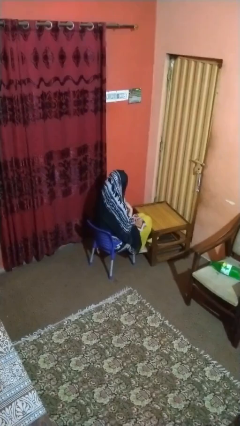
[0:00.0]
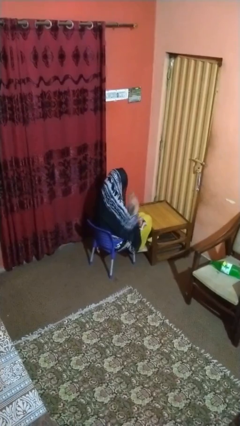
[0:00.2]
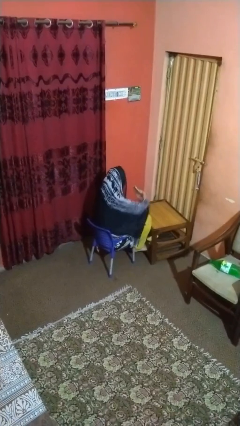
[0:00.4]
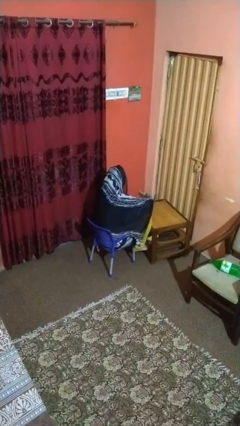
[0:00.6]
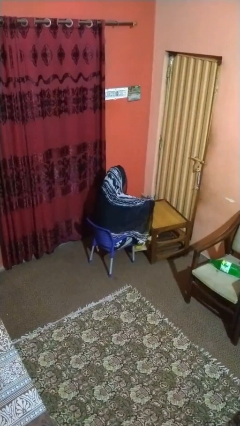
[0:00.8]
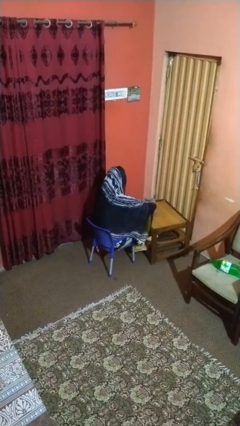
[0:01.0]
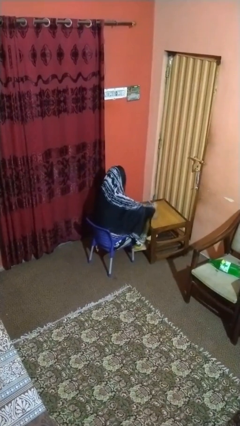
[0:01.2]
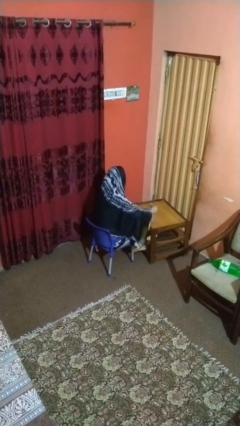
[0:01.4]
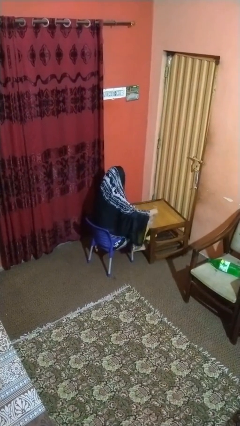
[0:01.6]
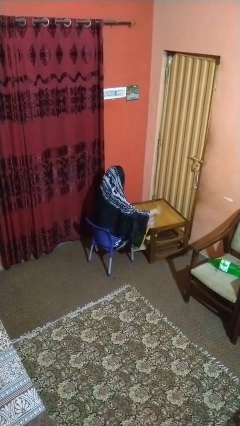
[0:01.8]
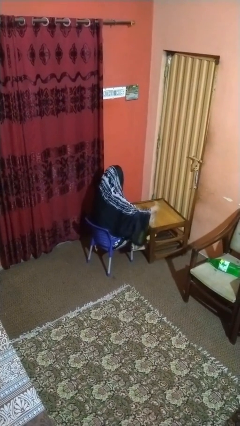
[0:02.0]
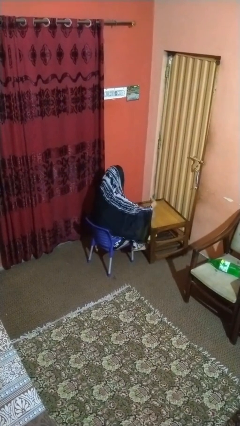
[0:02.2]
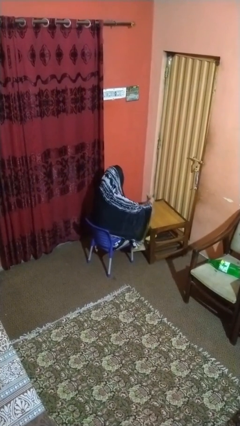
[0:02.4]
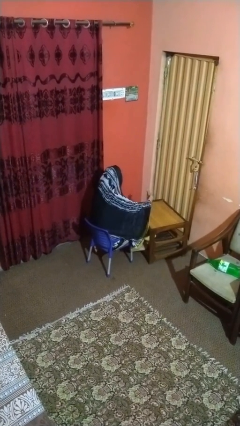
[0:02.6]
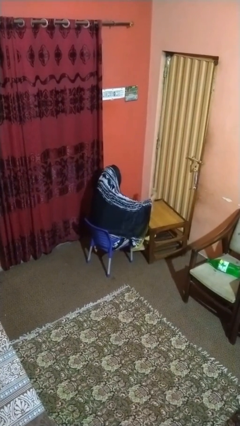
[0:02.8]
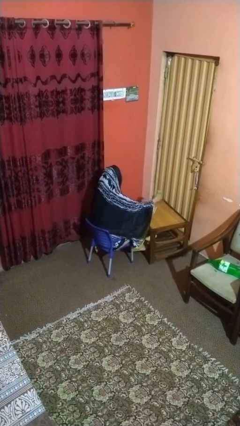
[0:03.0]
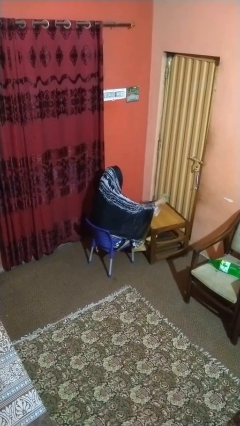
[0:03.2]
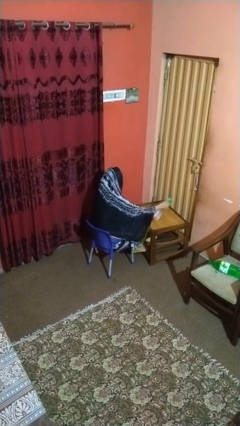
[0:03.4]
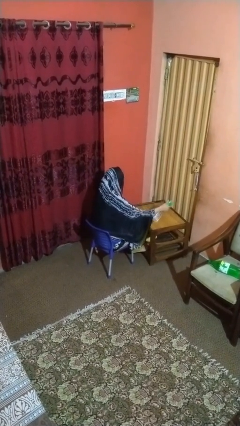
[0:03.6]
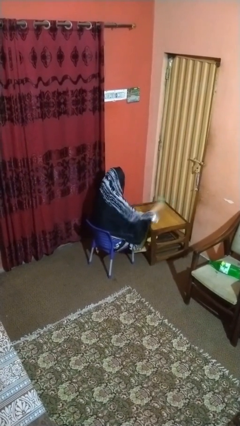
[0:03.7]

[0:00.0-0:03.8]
person sprays from bottle

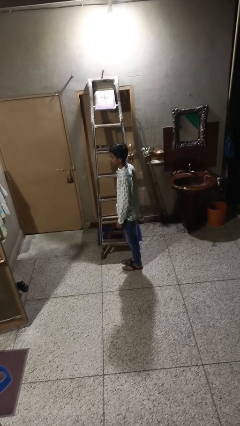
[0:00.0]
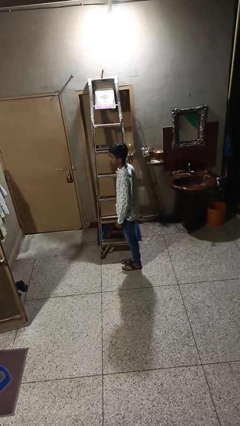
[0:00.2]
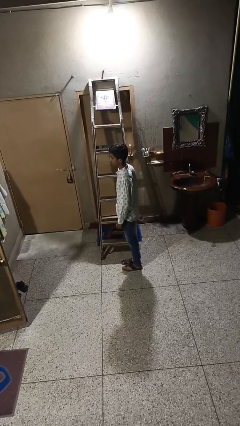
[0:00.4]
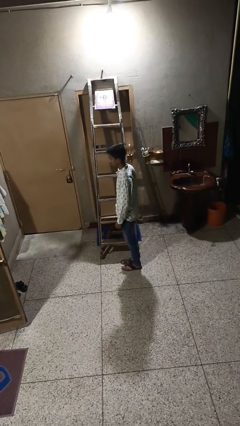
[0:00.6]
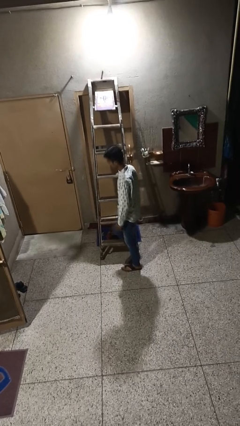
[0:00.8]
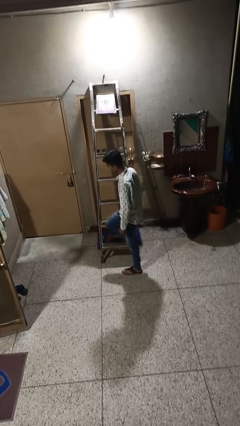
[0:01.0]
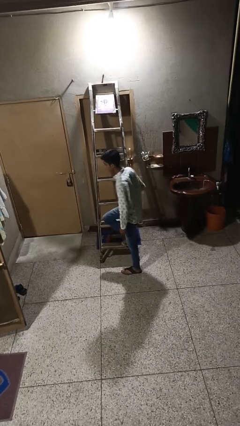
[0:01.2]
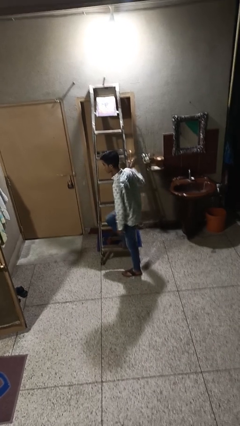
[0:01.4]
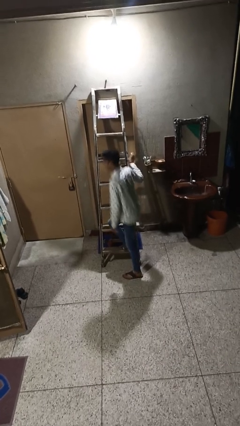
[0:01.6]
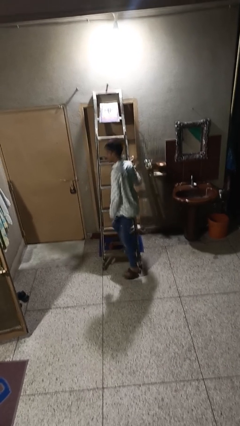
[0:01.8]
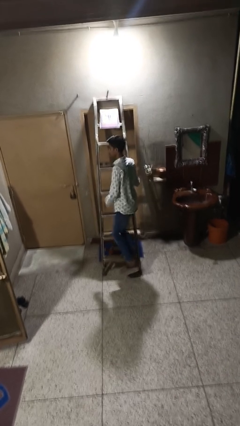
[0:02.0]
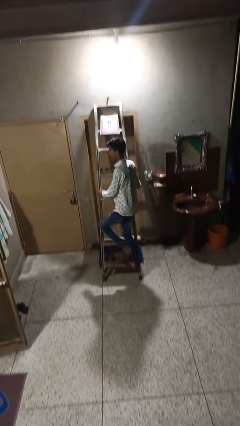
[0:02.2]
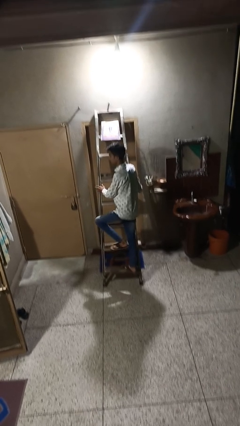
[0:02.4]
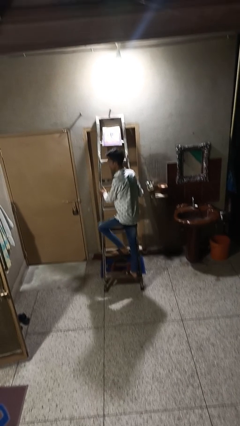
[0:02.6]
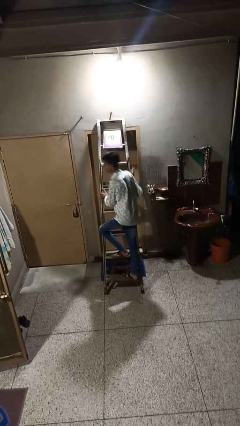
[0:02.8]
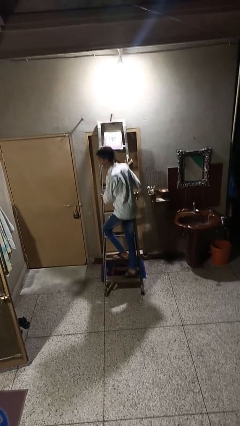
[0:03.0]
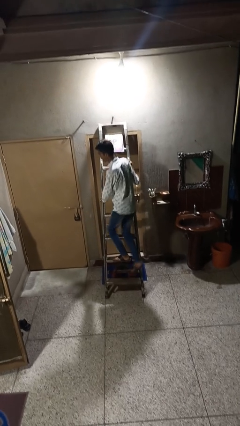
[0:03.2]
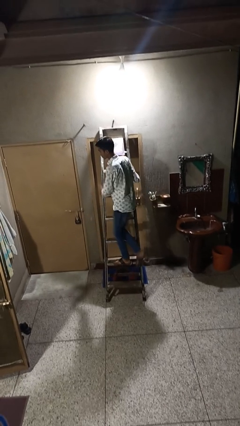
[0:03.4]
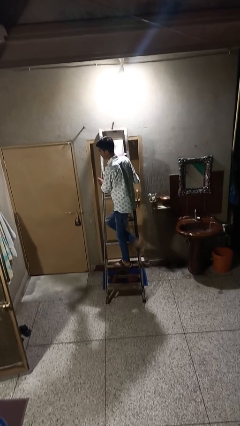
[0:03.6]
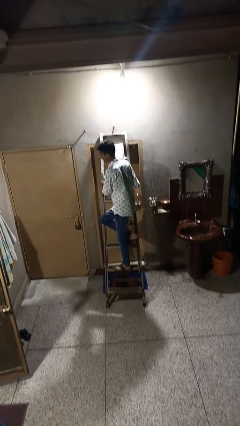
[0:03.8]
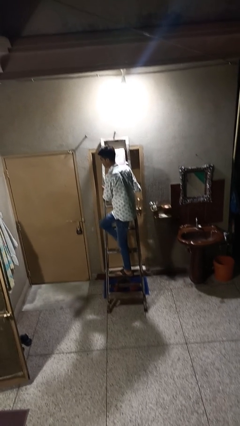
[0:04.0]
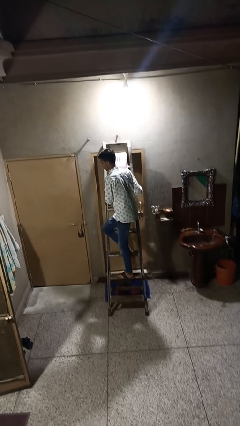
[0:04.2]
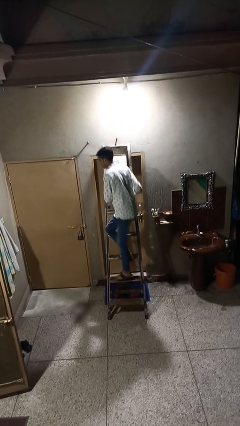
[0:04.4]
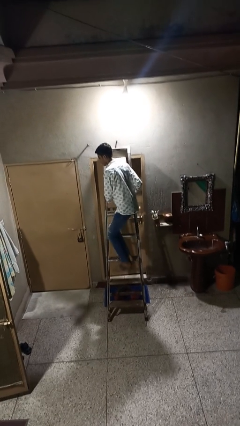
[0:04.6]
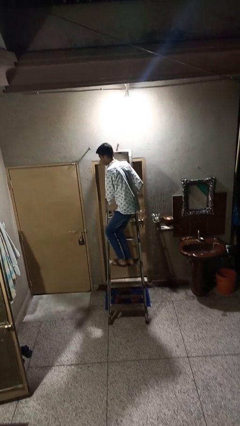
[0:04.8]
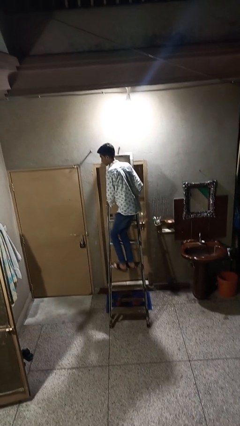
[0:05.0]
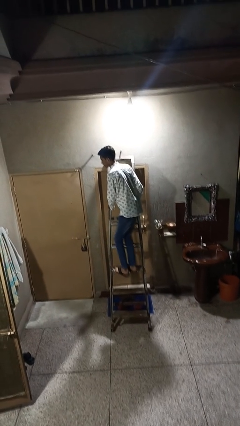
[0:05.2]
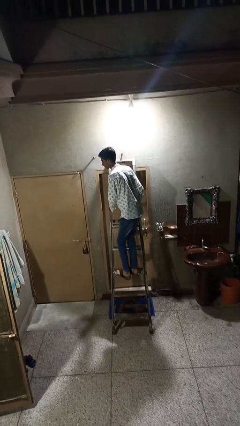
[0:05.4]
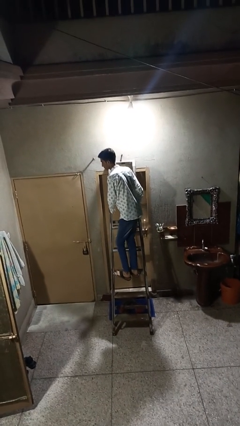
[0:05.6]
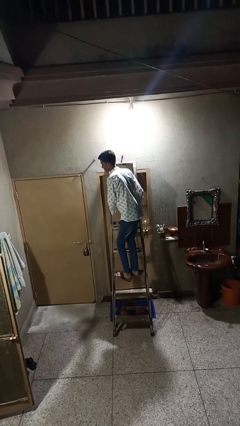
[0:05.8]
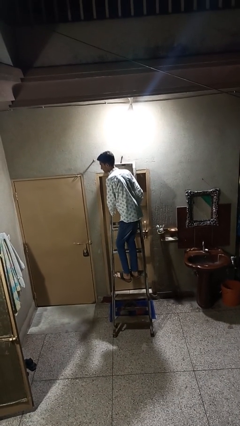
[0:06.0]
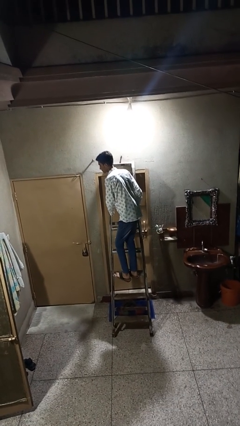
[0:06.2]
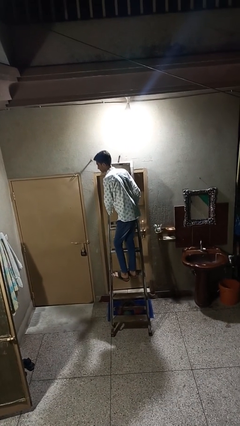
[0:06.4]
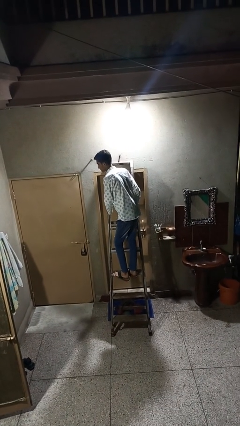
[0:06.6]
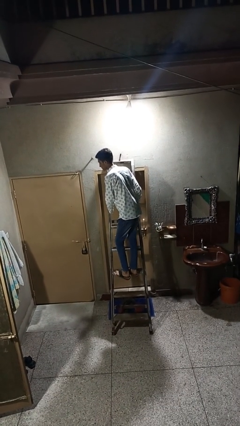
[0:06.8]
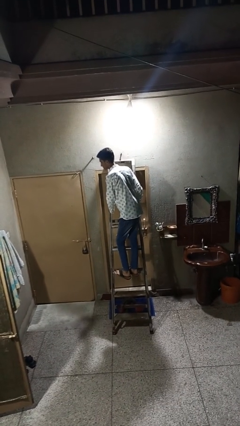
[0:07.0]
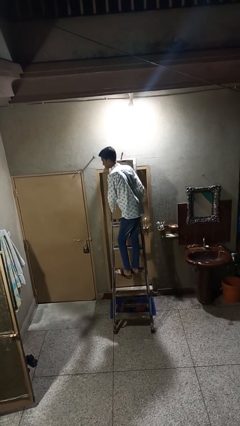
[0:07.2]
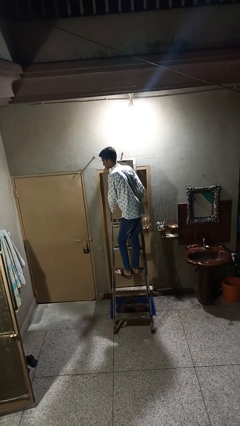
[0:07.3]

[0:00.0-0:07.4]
person climbs up ladder

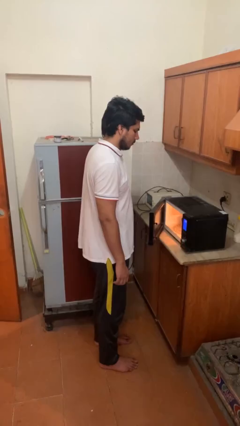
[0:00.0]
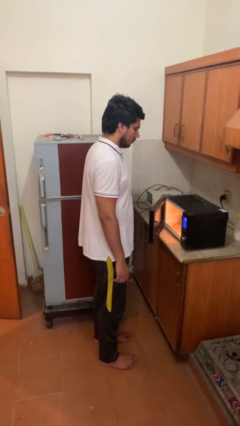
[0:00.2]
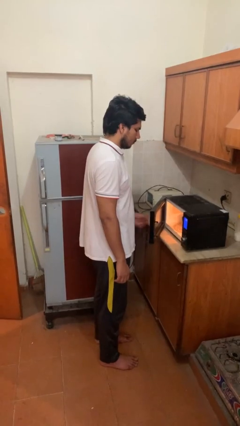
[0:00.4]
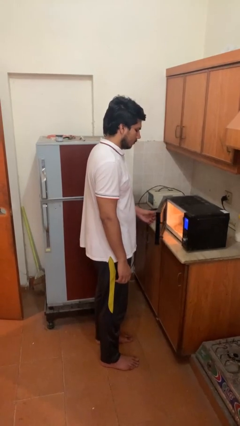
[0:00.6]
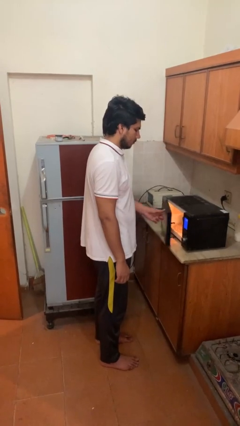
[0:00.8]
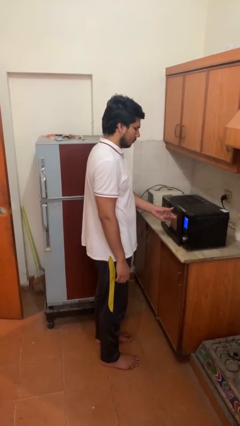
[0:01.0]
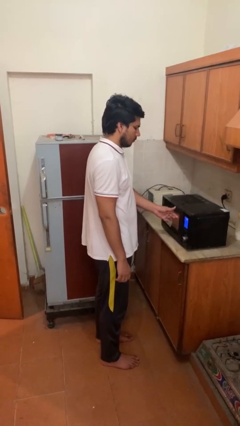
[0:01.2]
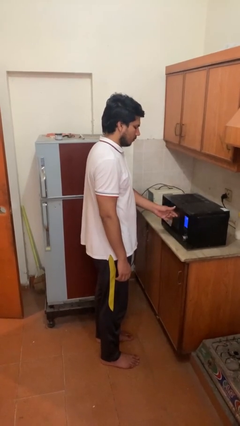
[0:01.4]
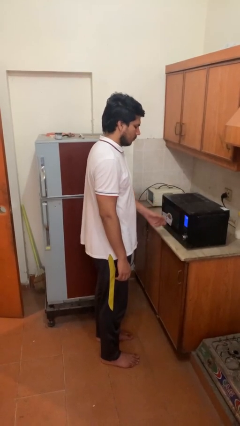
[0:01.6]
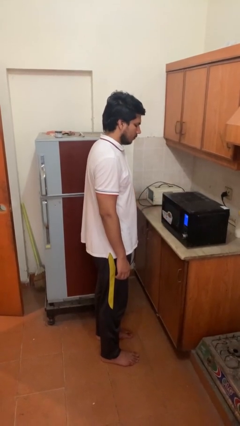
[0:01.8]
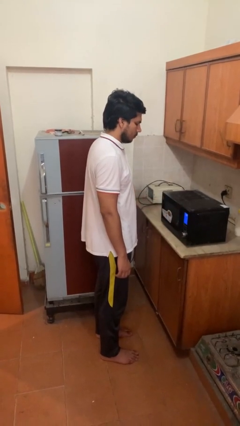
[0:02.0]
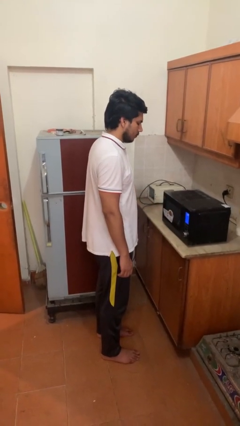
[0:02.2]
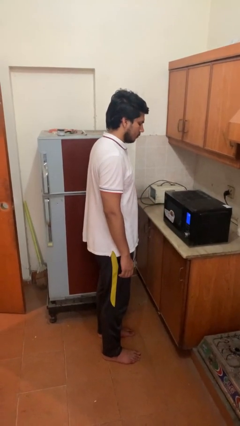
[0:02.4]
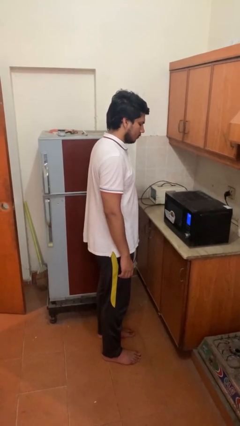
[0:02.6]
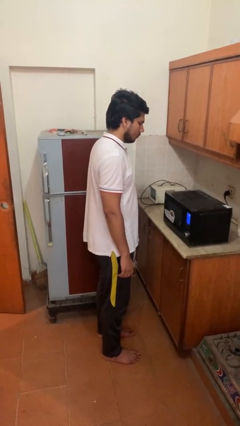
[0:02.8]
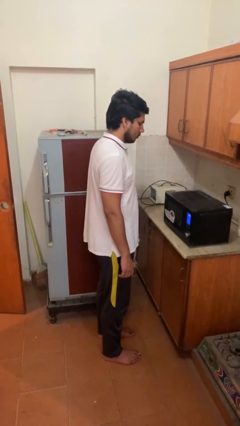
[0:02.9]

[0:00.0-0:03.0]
person closes microwave

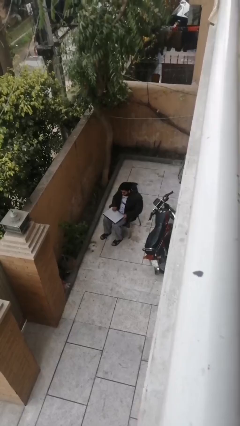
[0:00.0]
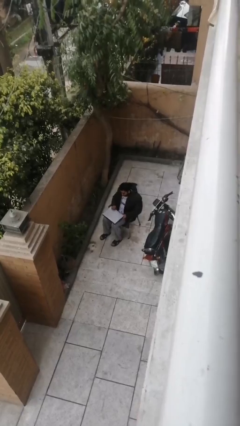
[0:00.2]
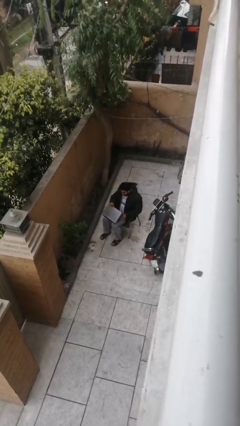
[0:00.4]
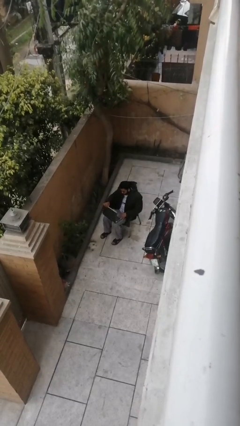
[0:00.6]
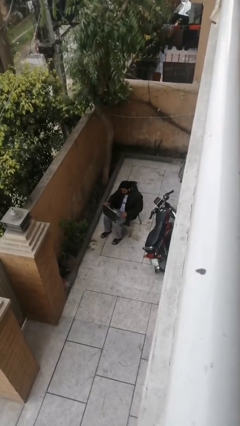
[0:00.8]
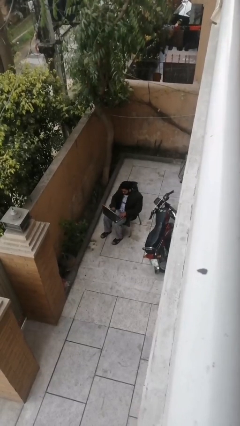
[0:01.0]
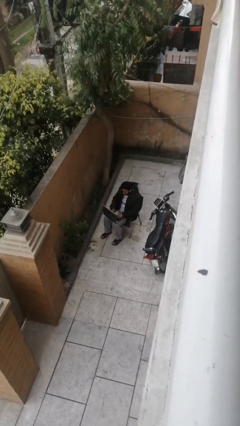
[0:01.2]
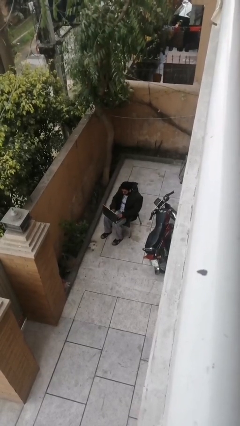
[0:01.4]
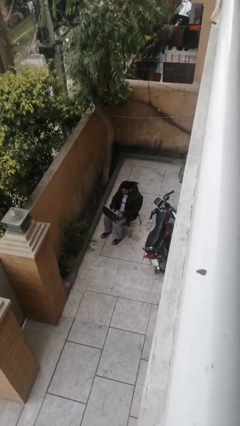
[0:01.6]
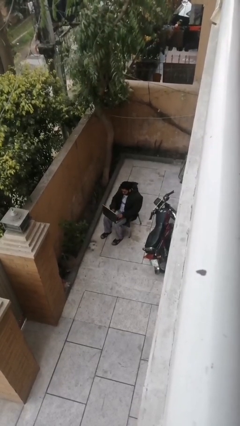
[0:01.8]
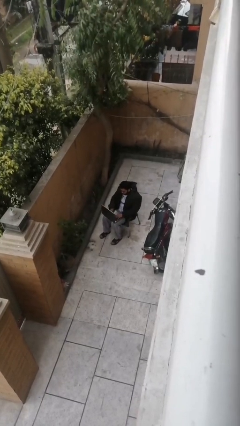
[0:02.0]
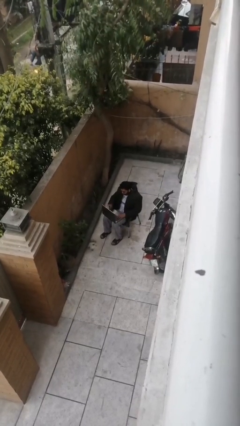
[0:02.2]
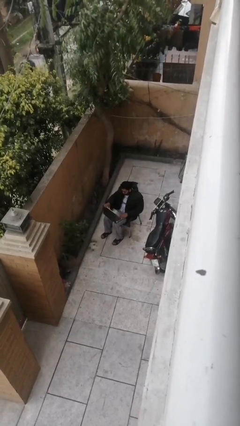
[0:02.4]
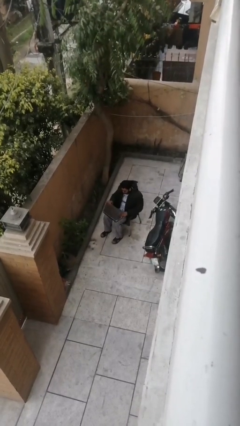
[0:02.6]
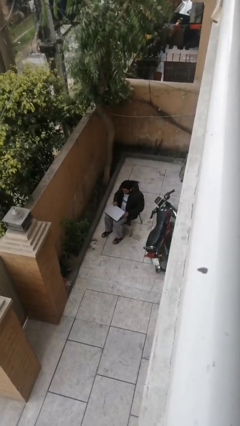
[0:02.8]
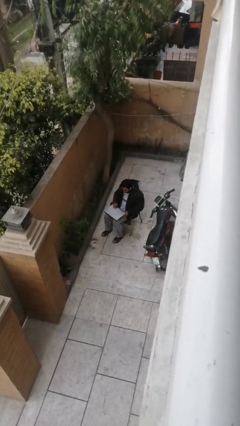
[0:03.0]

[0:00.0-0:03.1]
person interacts with laptop

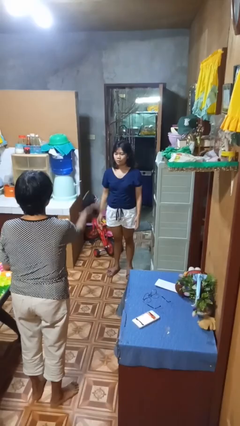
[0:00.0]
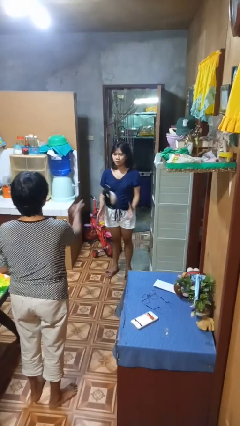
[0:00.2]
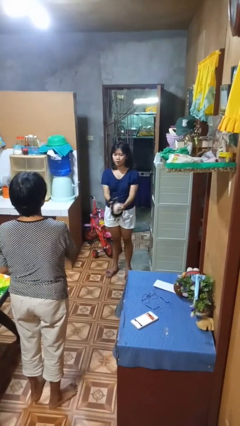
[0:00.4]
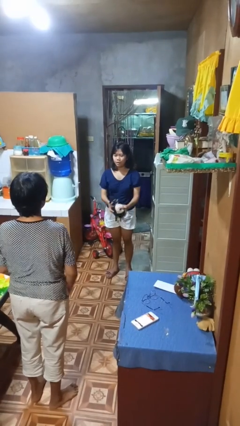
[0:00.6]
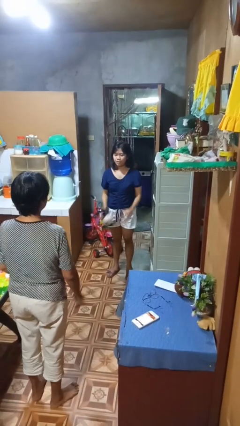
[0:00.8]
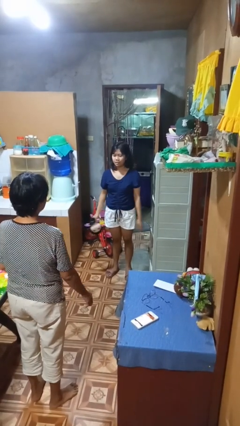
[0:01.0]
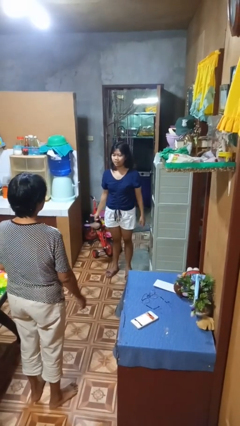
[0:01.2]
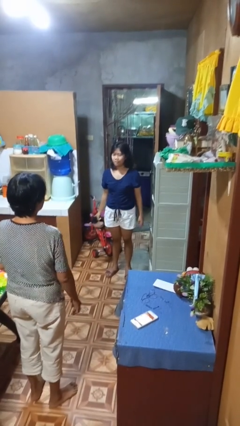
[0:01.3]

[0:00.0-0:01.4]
person catches object from person
